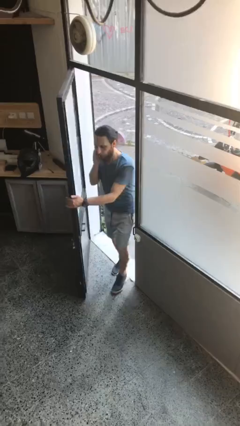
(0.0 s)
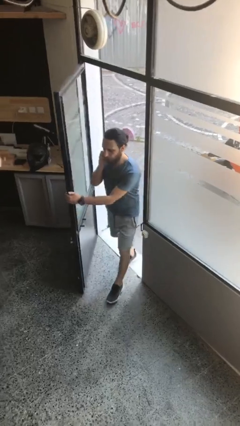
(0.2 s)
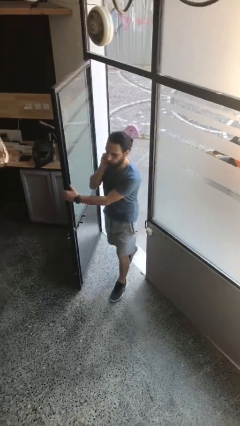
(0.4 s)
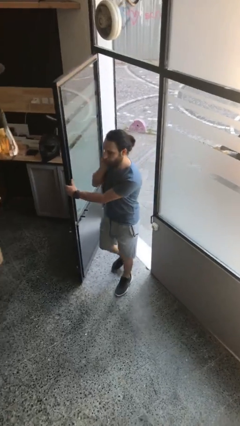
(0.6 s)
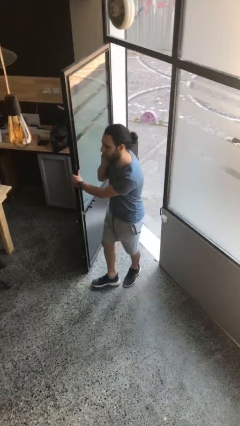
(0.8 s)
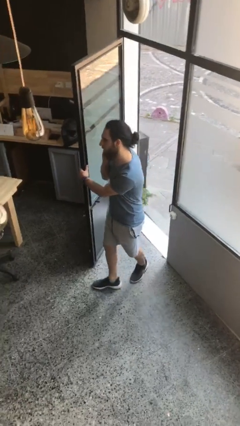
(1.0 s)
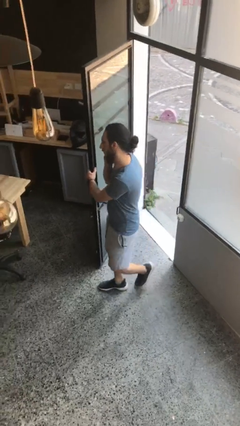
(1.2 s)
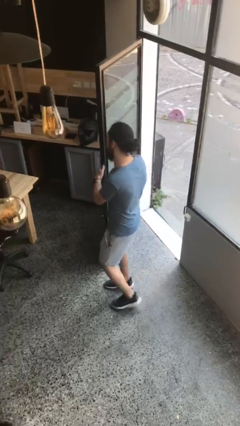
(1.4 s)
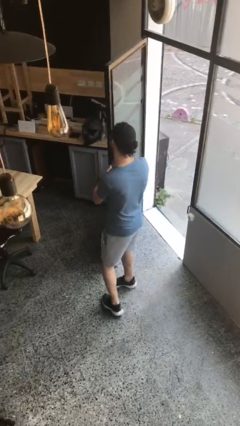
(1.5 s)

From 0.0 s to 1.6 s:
person enters scene through structure

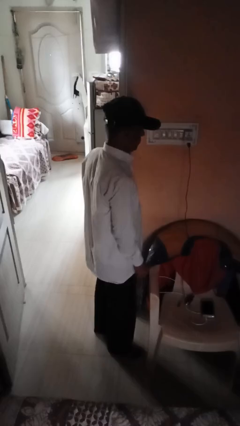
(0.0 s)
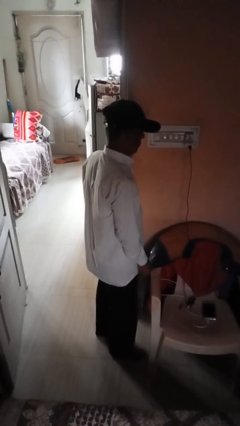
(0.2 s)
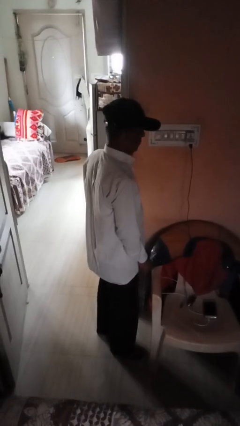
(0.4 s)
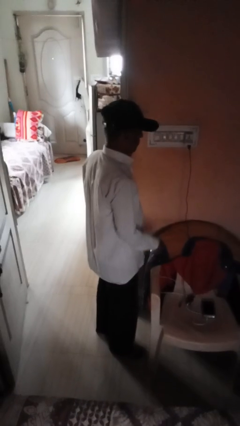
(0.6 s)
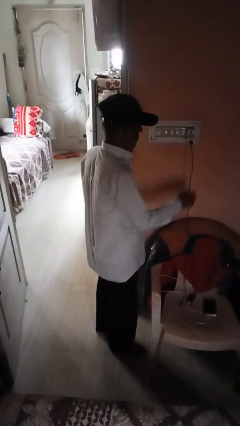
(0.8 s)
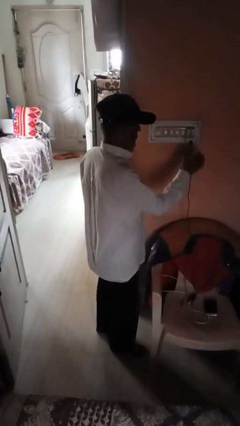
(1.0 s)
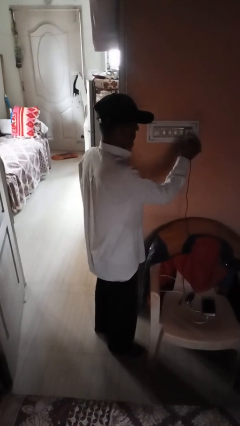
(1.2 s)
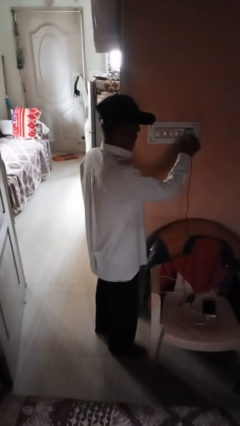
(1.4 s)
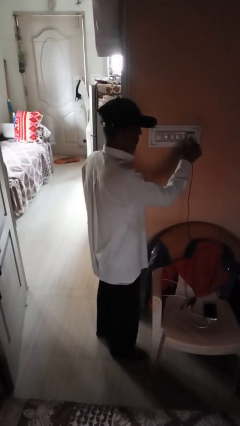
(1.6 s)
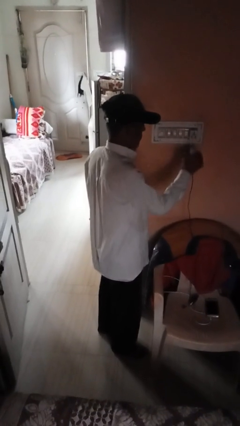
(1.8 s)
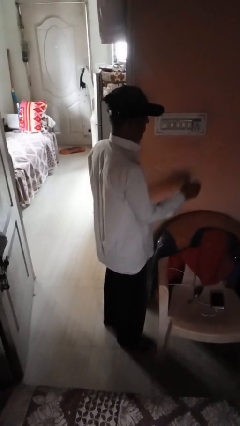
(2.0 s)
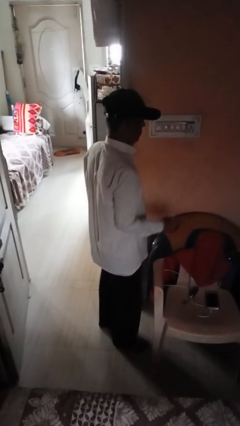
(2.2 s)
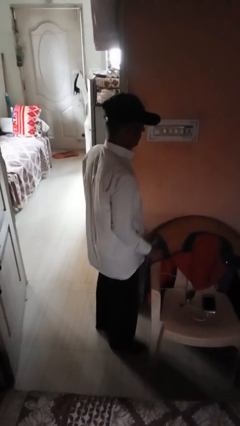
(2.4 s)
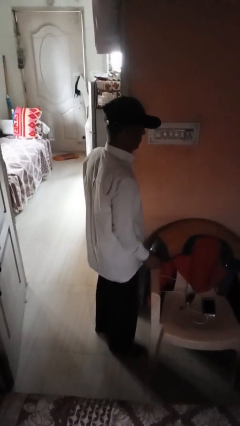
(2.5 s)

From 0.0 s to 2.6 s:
person unplugs from electrical socket

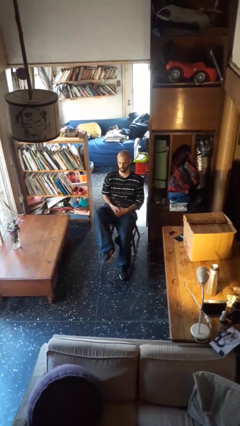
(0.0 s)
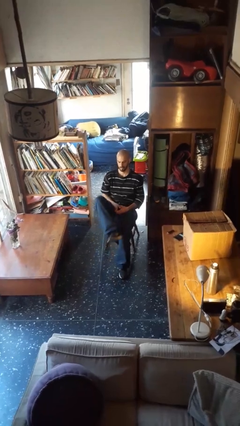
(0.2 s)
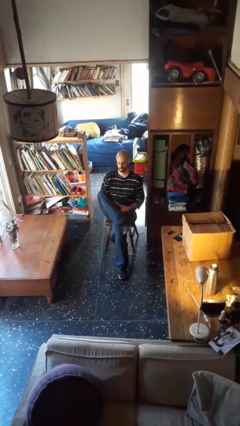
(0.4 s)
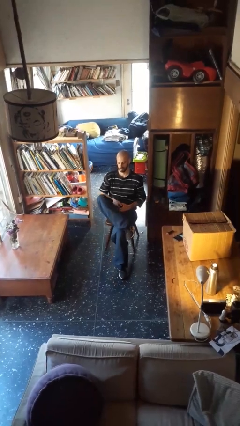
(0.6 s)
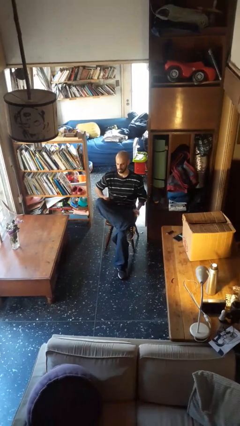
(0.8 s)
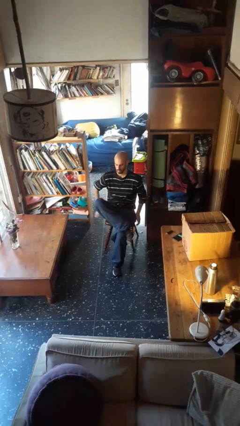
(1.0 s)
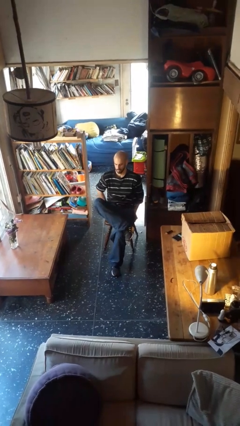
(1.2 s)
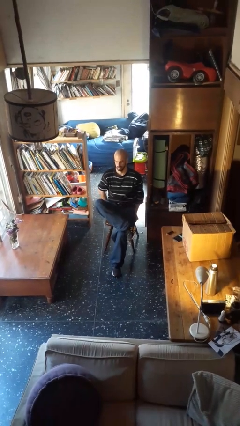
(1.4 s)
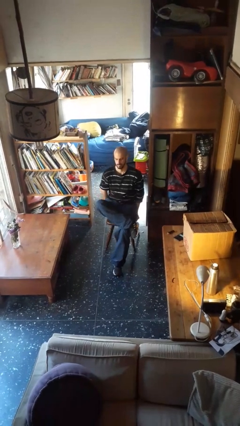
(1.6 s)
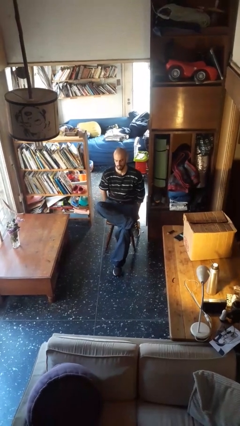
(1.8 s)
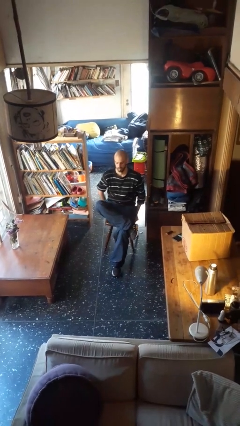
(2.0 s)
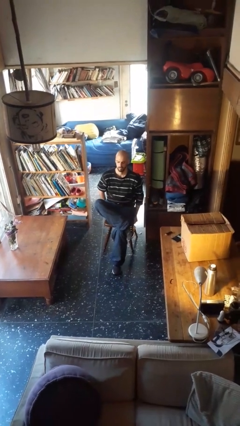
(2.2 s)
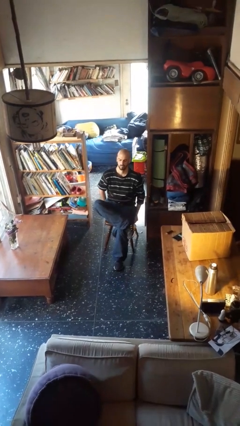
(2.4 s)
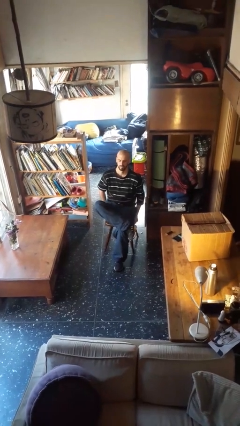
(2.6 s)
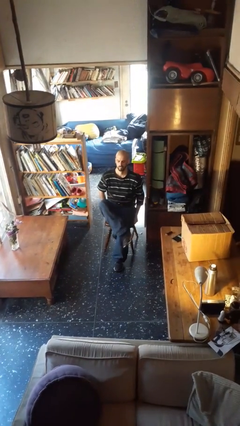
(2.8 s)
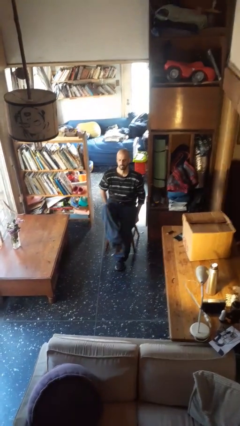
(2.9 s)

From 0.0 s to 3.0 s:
person crosses legs

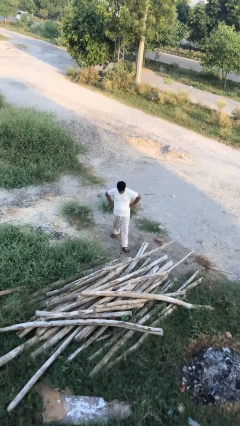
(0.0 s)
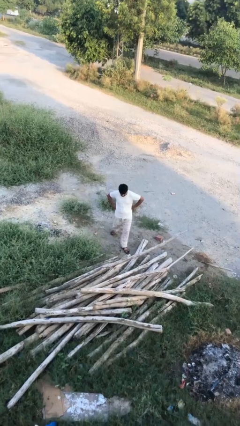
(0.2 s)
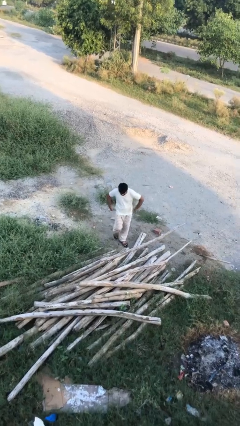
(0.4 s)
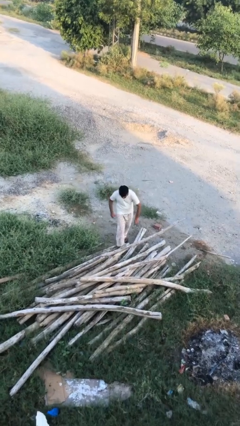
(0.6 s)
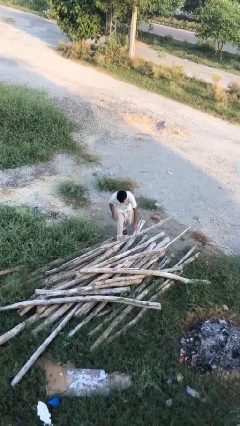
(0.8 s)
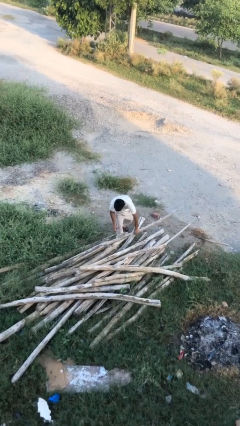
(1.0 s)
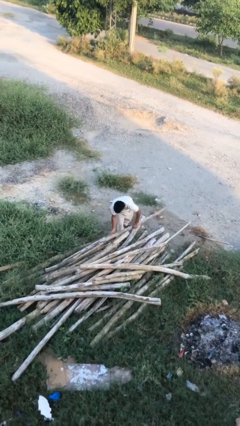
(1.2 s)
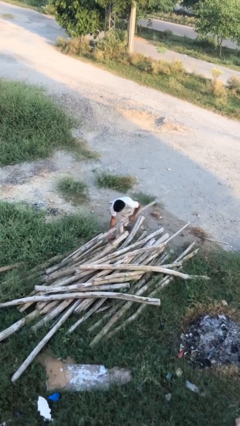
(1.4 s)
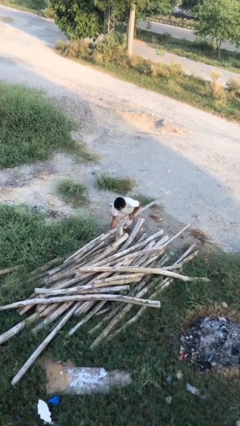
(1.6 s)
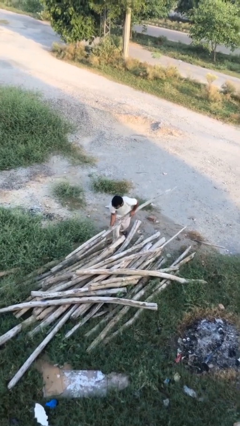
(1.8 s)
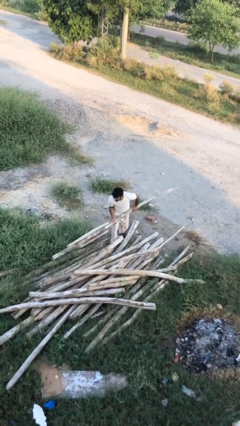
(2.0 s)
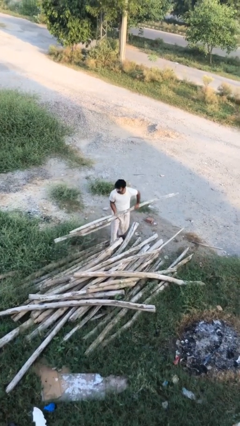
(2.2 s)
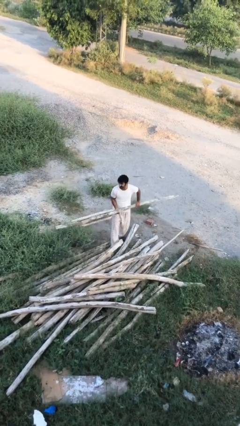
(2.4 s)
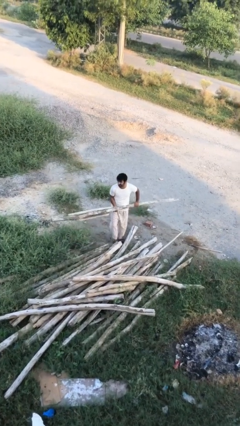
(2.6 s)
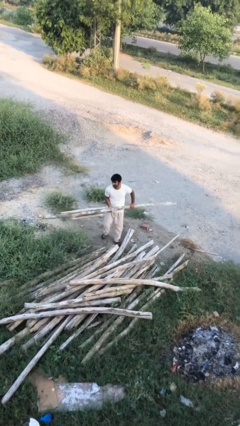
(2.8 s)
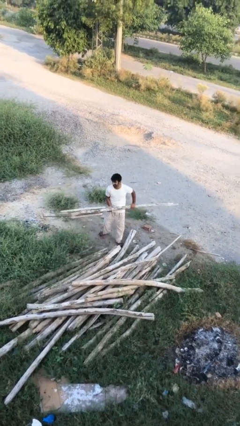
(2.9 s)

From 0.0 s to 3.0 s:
person picks up object from floor

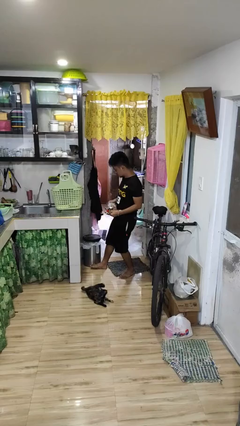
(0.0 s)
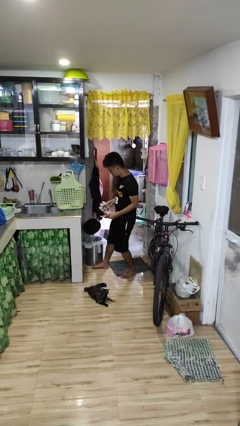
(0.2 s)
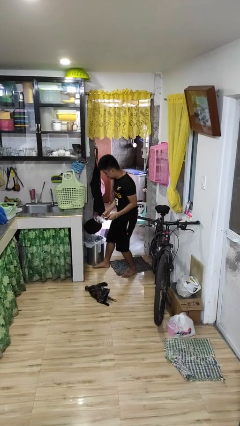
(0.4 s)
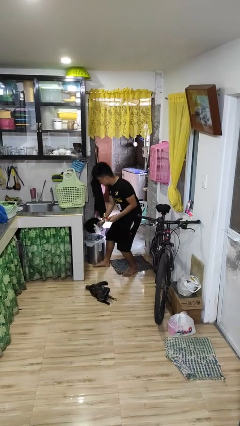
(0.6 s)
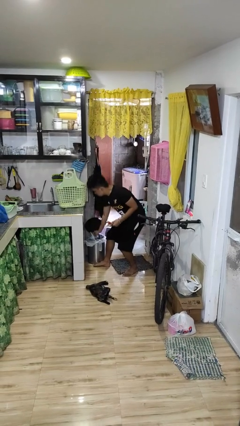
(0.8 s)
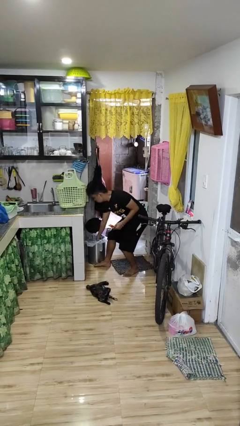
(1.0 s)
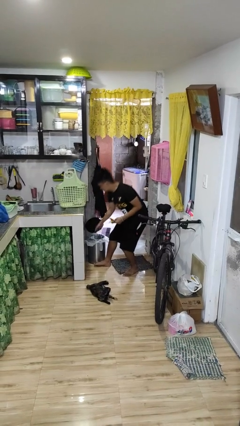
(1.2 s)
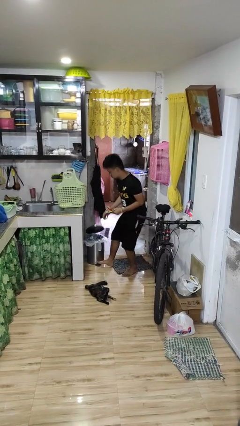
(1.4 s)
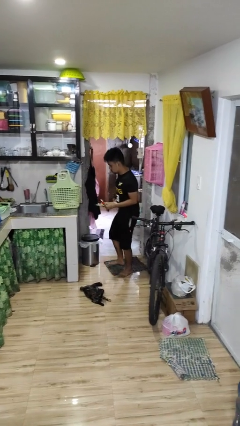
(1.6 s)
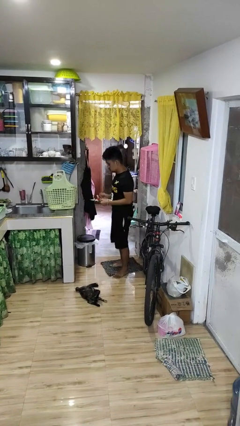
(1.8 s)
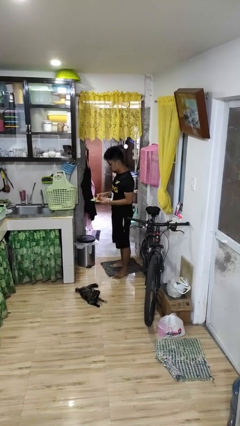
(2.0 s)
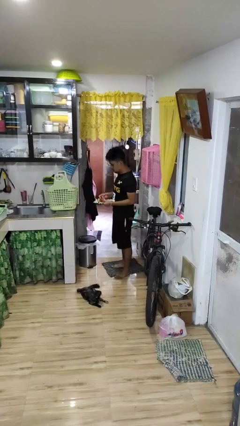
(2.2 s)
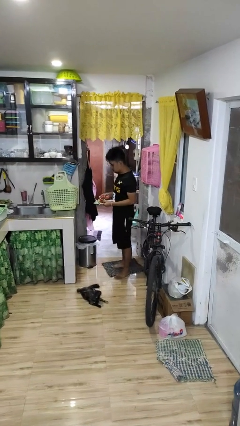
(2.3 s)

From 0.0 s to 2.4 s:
person discards trash

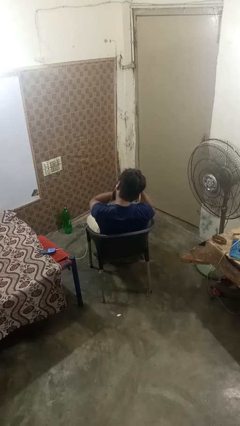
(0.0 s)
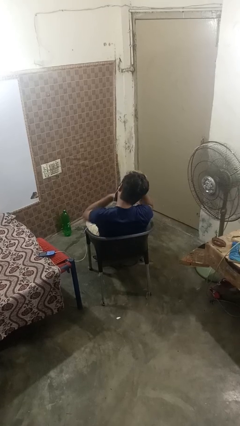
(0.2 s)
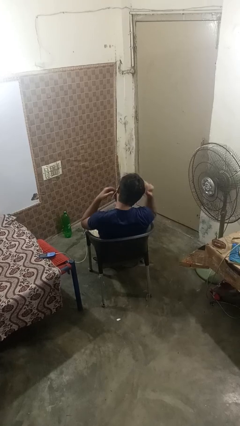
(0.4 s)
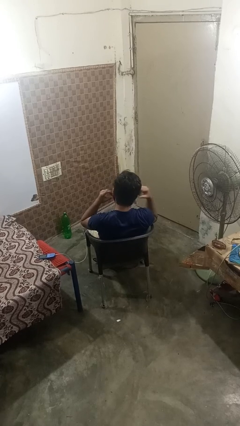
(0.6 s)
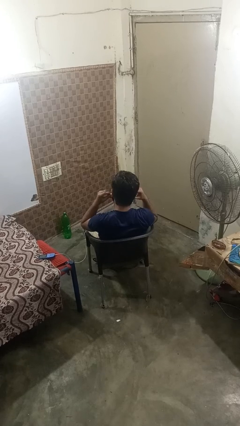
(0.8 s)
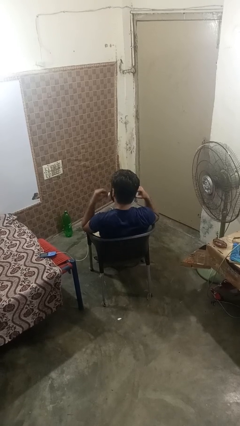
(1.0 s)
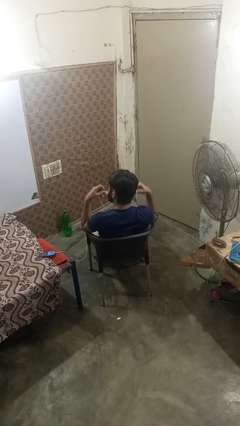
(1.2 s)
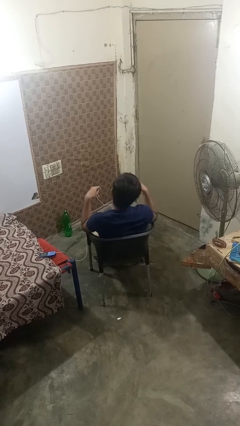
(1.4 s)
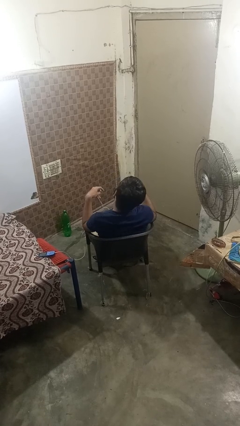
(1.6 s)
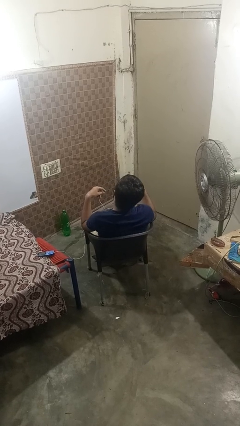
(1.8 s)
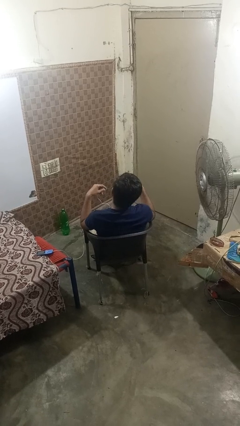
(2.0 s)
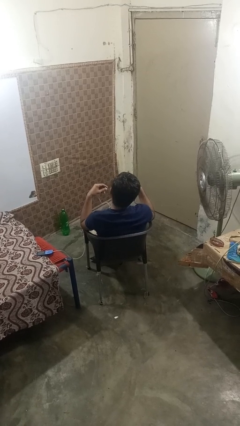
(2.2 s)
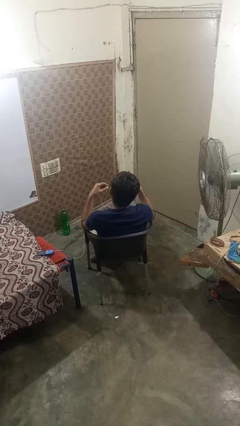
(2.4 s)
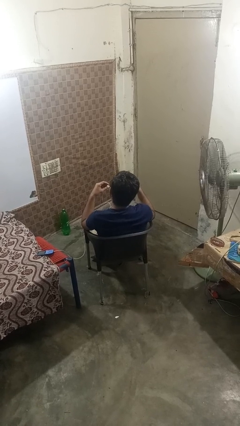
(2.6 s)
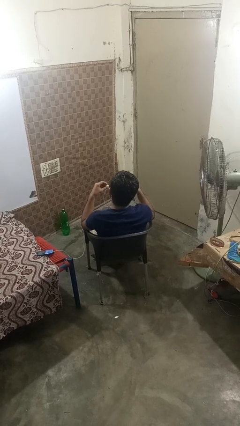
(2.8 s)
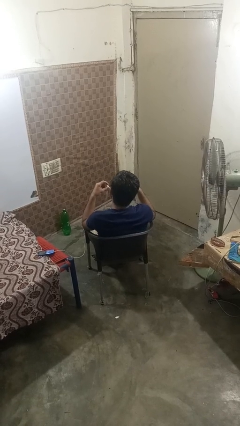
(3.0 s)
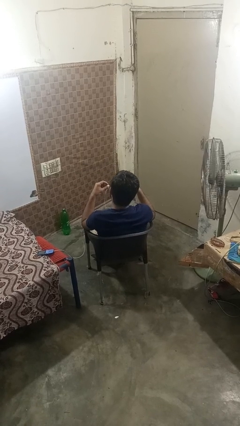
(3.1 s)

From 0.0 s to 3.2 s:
person takes off headphones

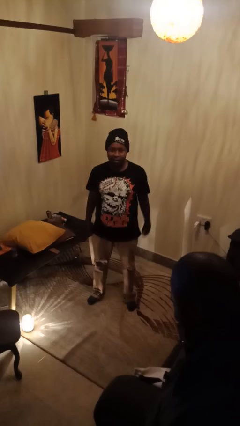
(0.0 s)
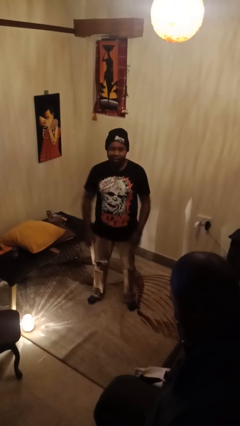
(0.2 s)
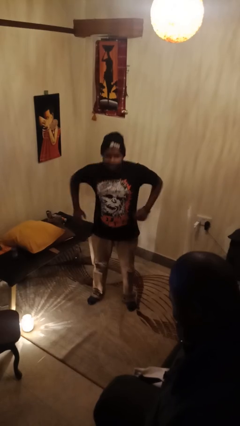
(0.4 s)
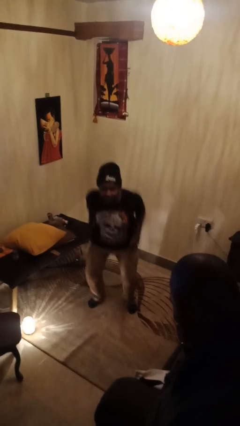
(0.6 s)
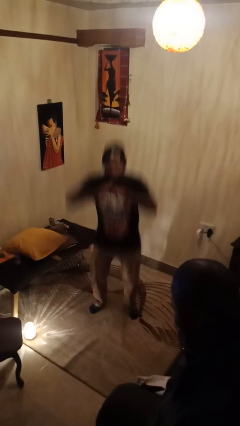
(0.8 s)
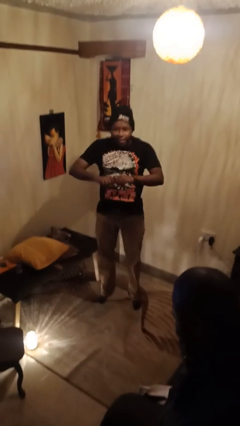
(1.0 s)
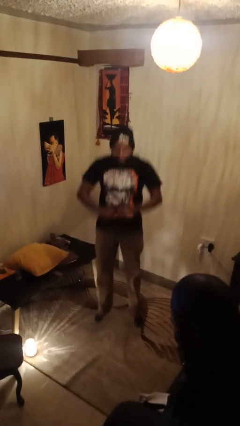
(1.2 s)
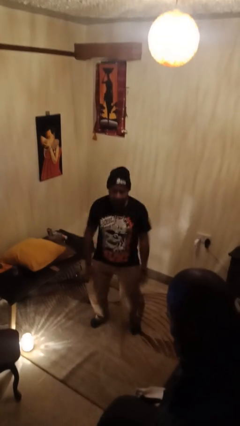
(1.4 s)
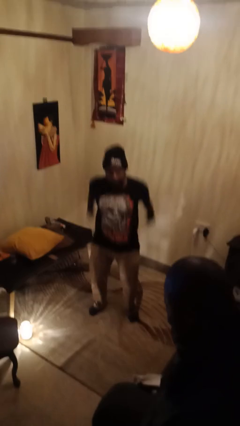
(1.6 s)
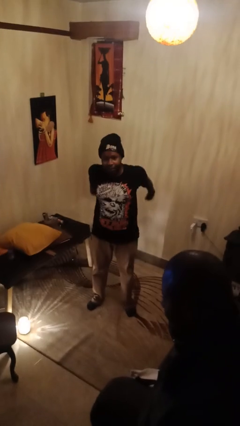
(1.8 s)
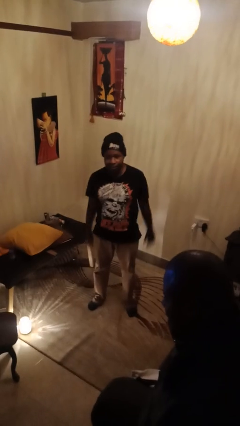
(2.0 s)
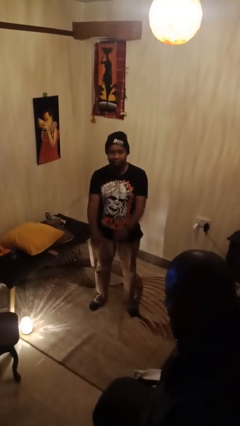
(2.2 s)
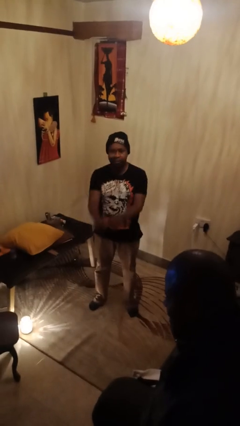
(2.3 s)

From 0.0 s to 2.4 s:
person jumps
